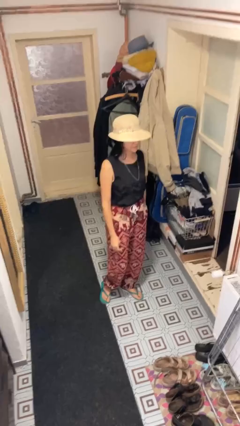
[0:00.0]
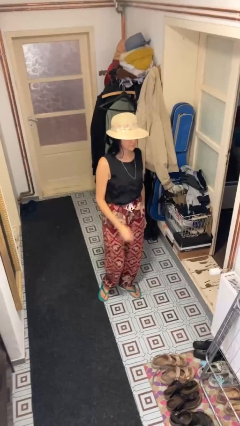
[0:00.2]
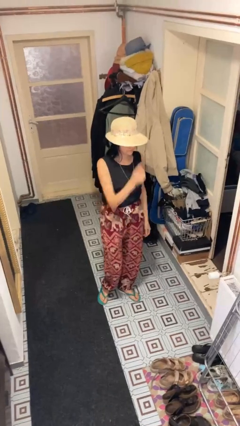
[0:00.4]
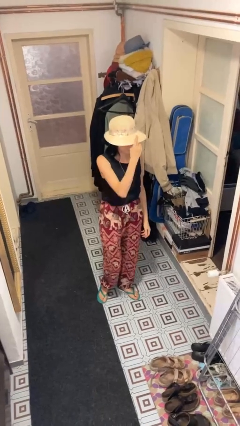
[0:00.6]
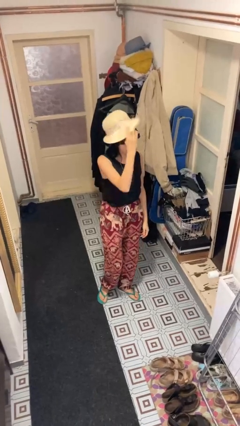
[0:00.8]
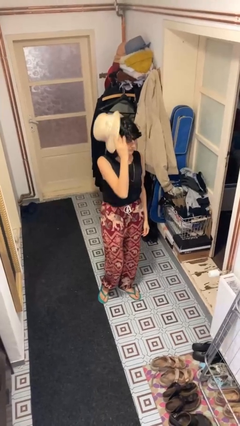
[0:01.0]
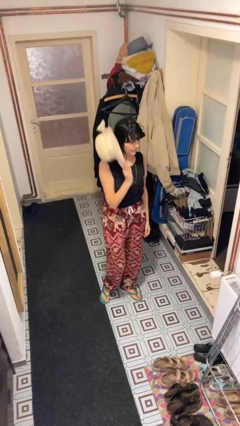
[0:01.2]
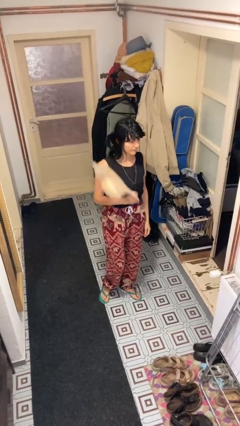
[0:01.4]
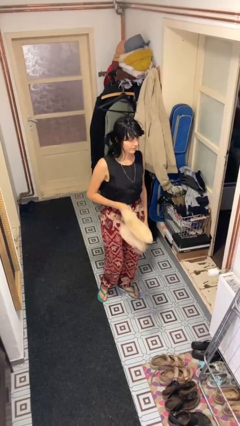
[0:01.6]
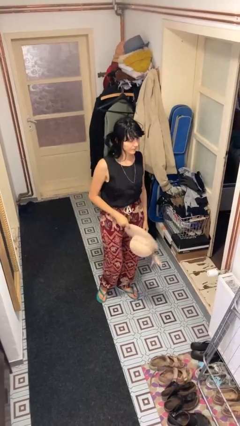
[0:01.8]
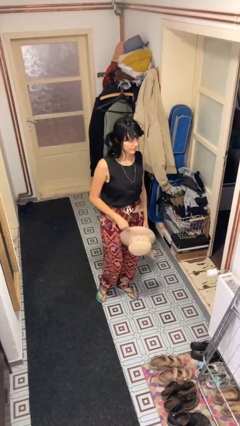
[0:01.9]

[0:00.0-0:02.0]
person takes off hat

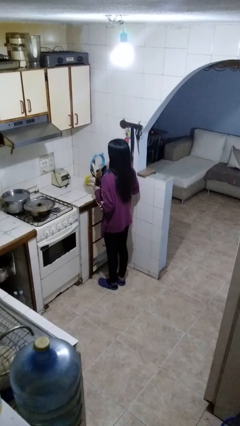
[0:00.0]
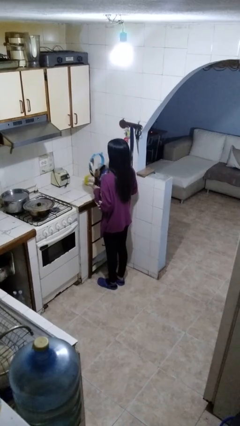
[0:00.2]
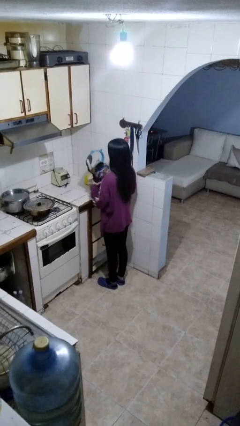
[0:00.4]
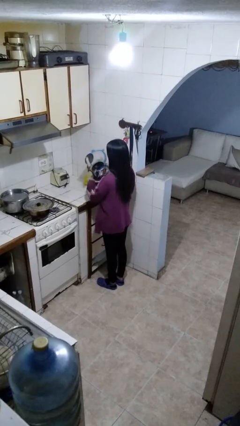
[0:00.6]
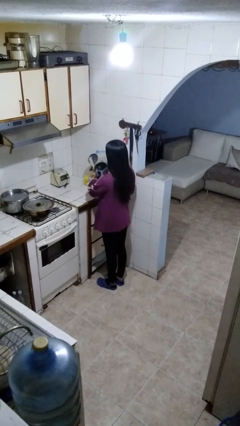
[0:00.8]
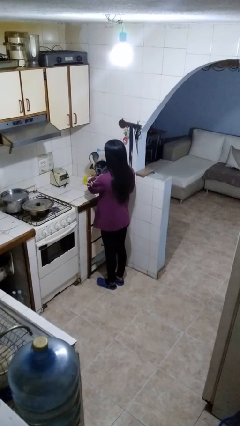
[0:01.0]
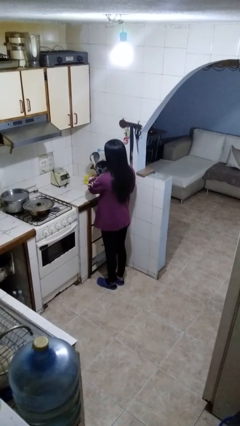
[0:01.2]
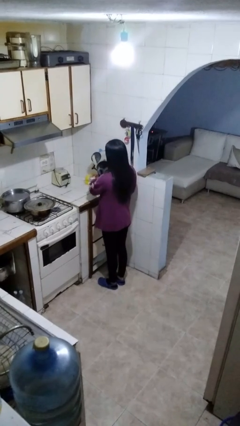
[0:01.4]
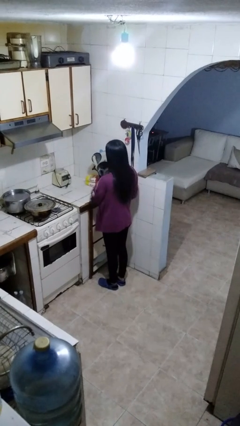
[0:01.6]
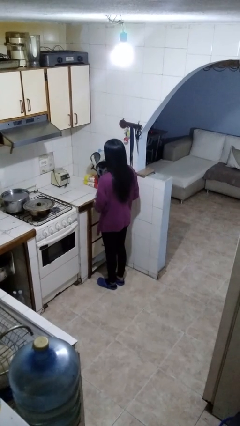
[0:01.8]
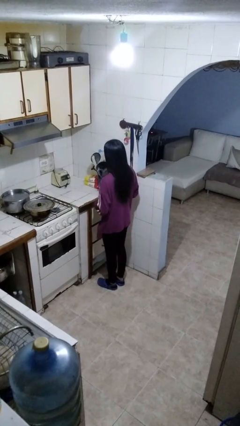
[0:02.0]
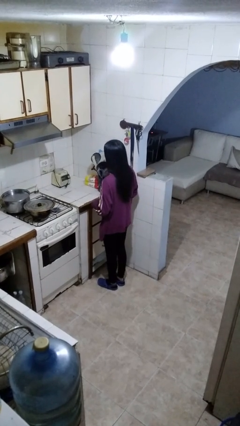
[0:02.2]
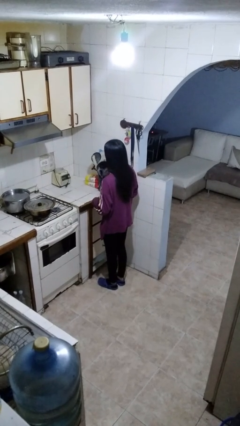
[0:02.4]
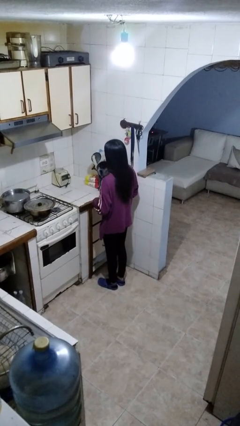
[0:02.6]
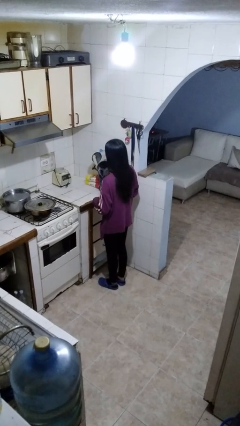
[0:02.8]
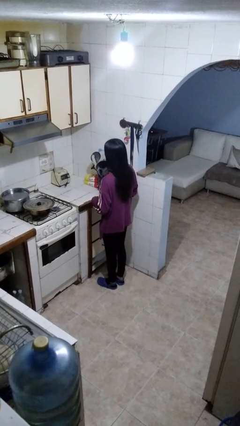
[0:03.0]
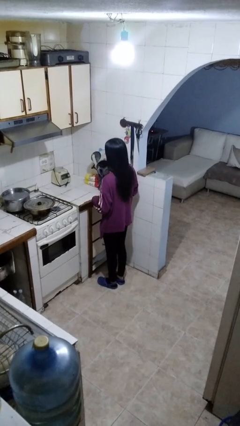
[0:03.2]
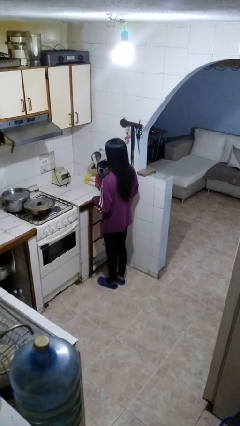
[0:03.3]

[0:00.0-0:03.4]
person picks up object from countertop

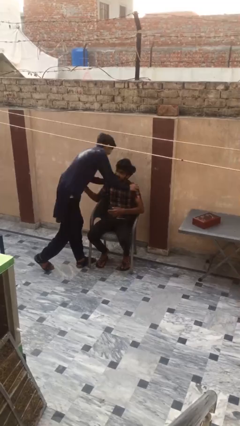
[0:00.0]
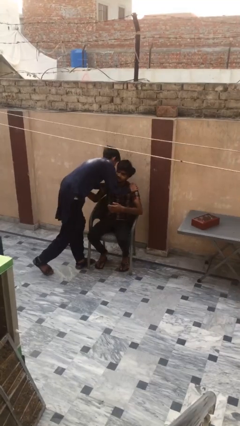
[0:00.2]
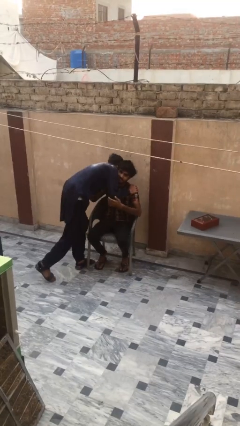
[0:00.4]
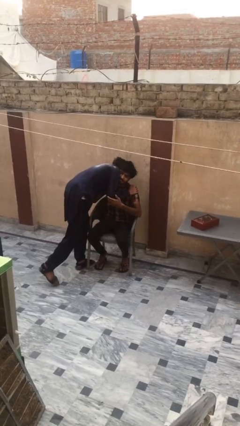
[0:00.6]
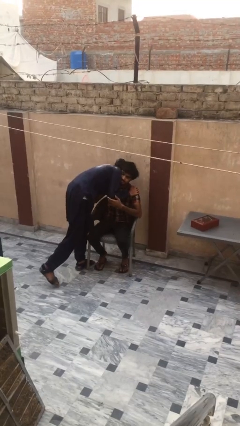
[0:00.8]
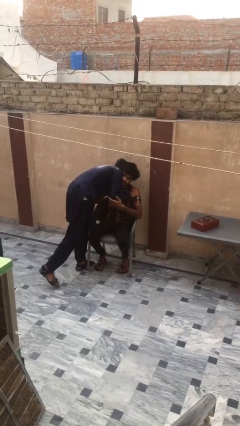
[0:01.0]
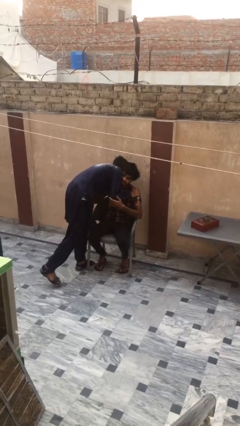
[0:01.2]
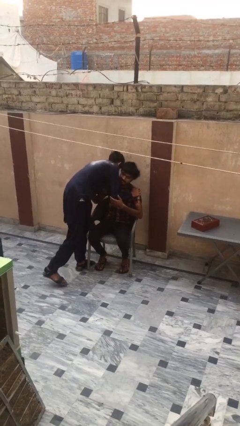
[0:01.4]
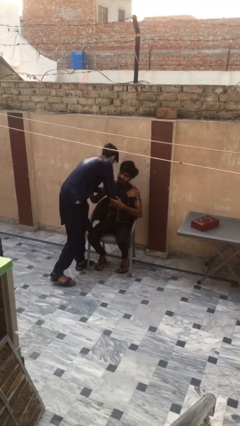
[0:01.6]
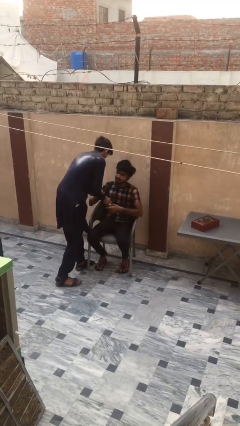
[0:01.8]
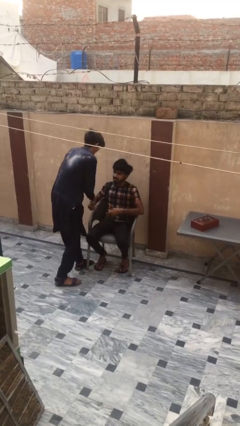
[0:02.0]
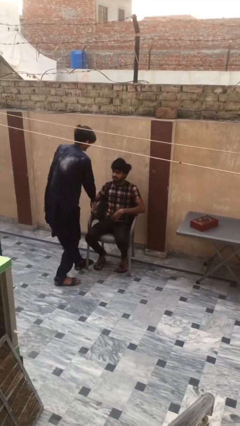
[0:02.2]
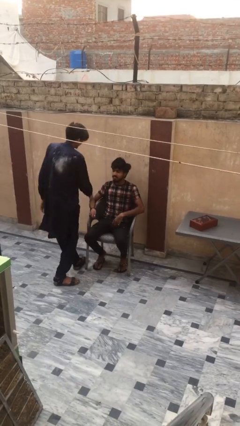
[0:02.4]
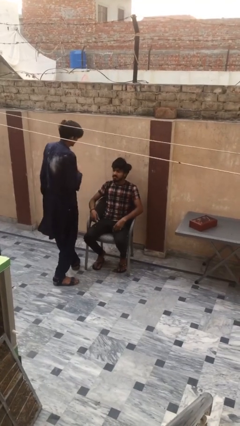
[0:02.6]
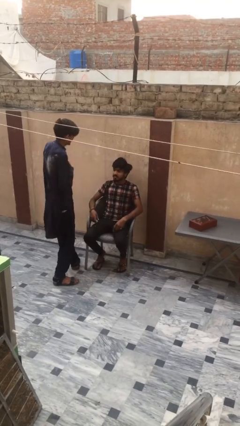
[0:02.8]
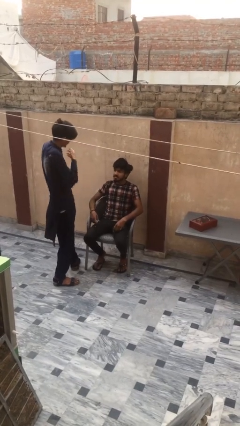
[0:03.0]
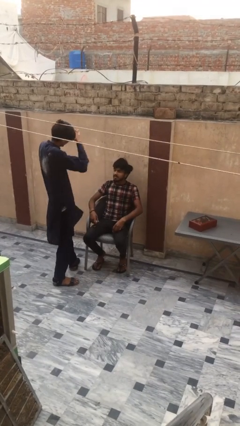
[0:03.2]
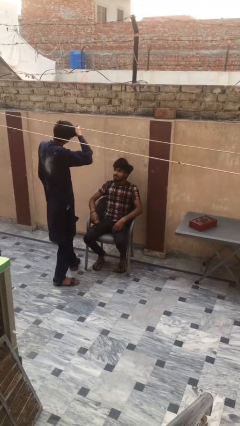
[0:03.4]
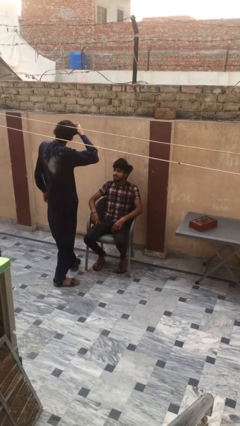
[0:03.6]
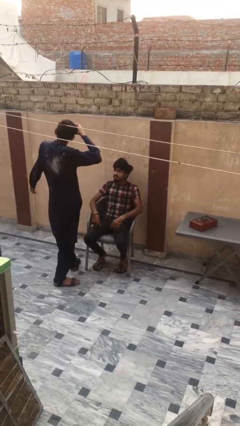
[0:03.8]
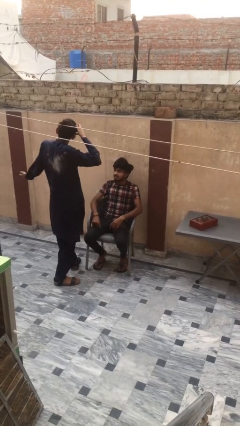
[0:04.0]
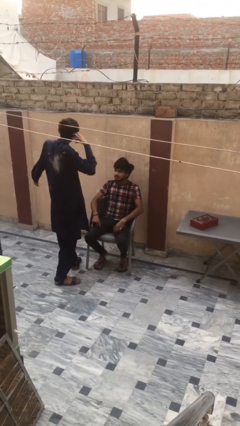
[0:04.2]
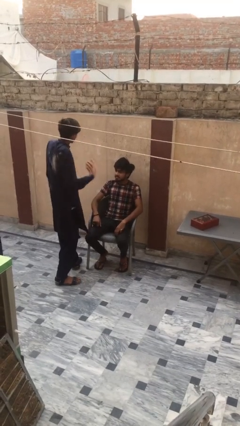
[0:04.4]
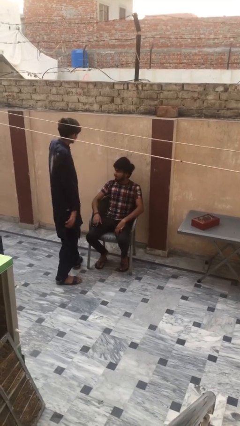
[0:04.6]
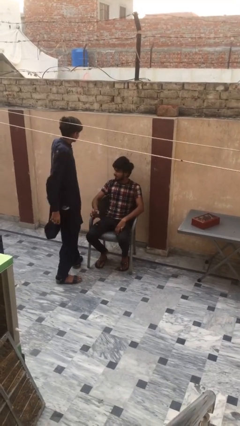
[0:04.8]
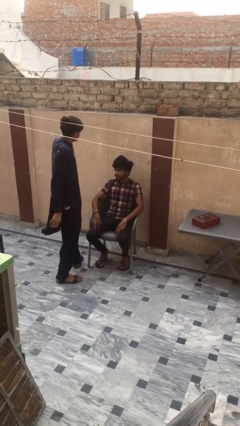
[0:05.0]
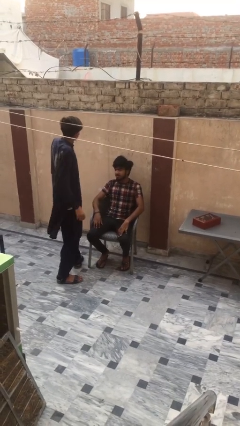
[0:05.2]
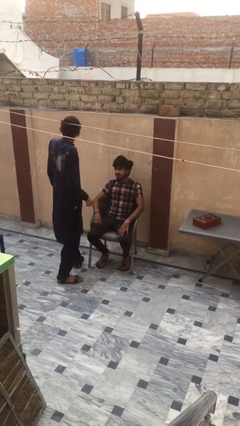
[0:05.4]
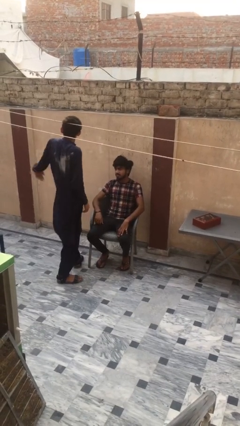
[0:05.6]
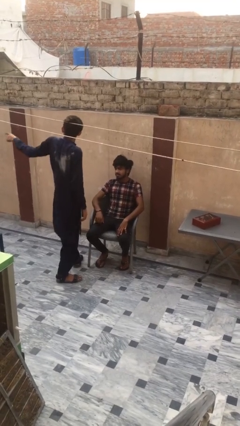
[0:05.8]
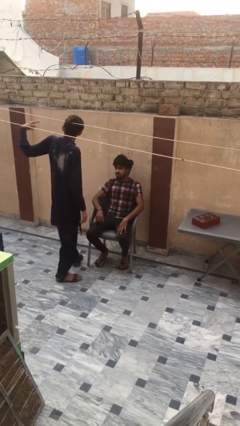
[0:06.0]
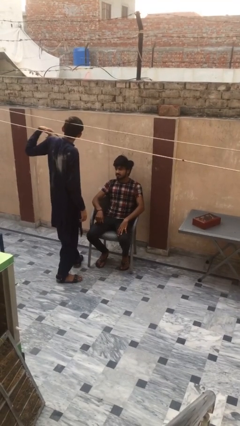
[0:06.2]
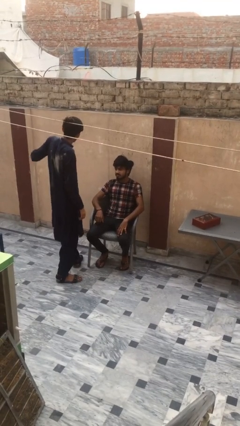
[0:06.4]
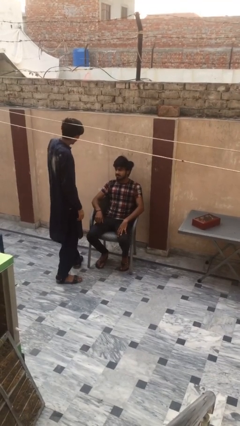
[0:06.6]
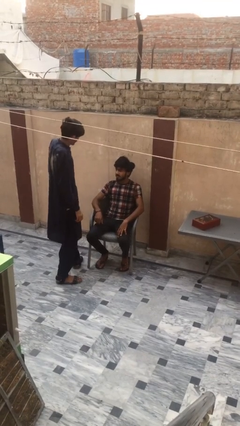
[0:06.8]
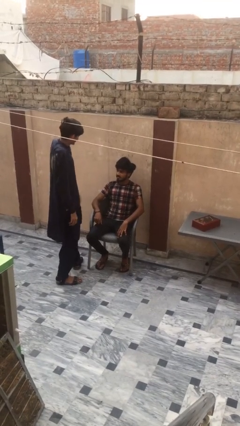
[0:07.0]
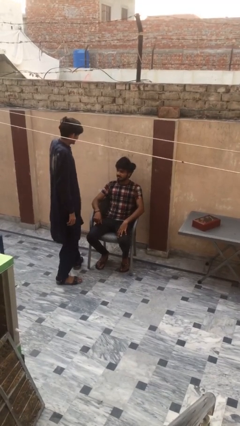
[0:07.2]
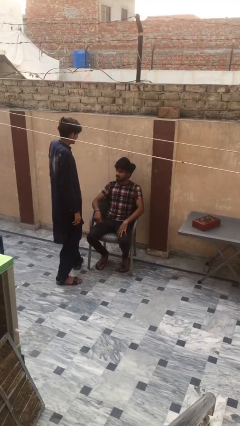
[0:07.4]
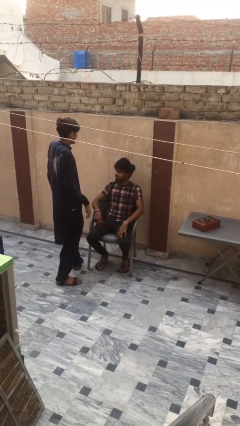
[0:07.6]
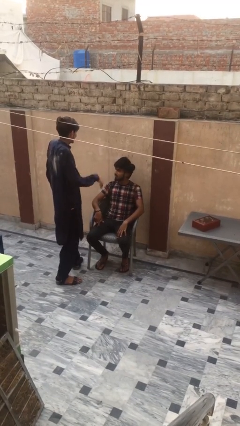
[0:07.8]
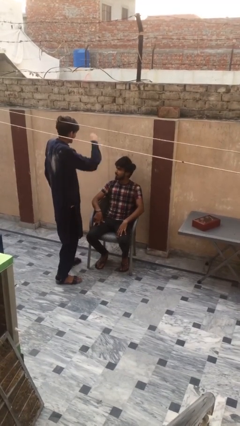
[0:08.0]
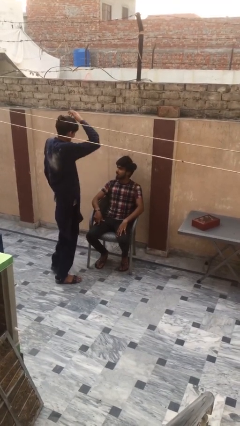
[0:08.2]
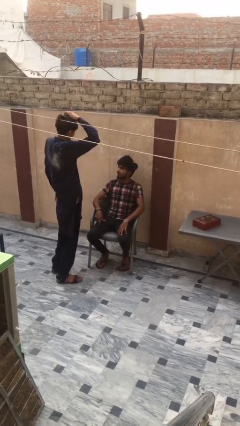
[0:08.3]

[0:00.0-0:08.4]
person embraces person

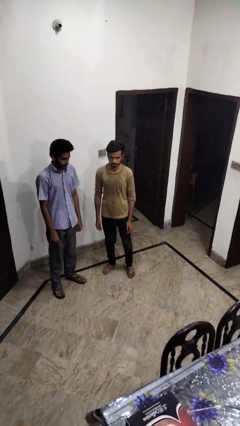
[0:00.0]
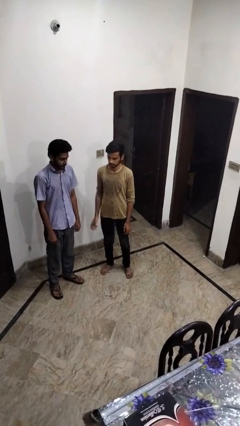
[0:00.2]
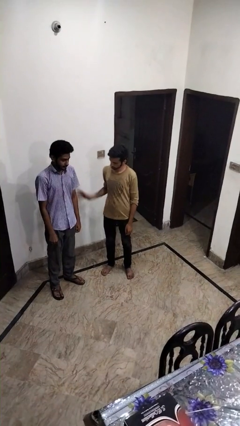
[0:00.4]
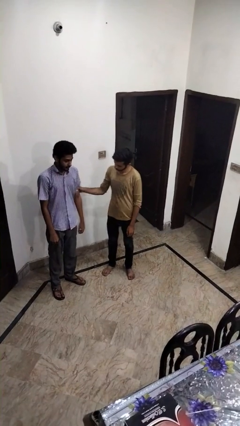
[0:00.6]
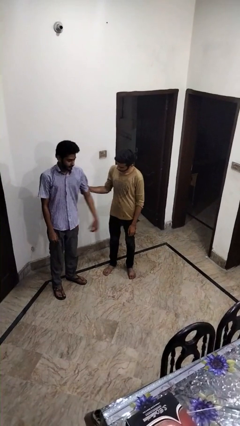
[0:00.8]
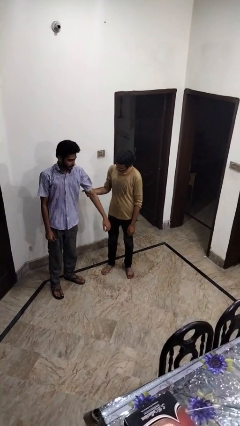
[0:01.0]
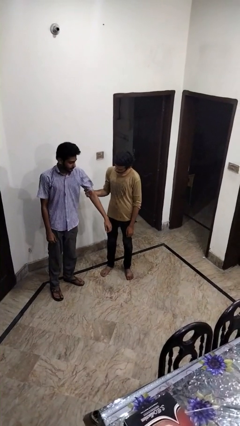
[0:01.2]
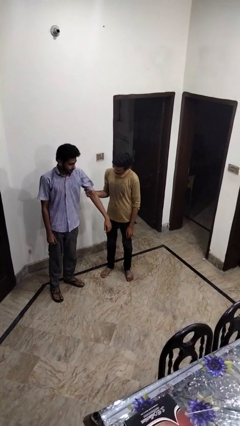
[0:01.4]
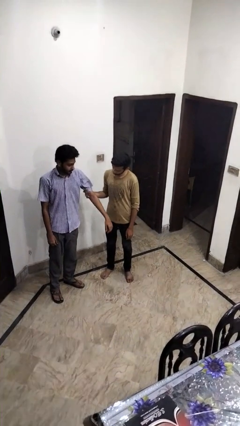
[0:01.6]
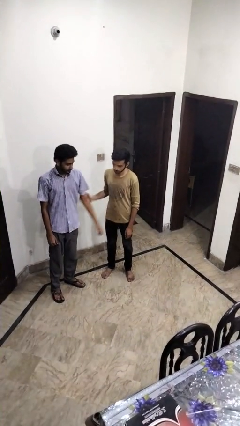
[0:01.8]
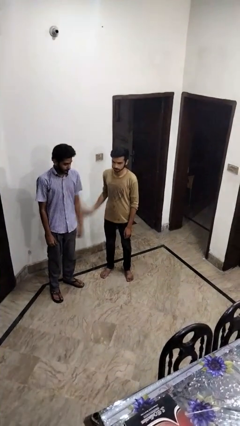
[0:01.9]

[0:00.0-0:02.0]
person grabs person by bicep

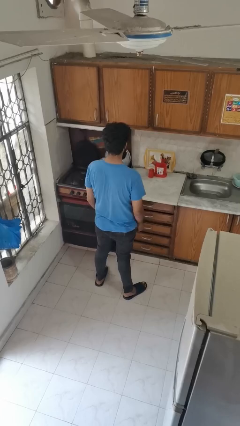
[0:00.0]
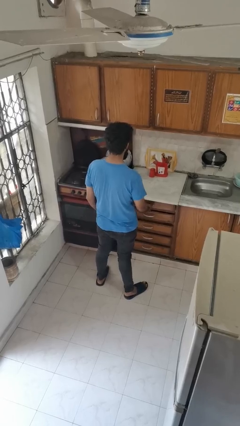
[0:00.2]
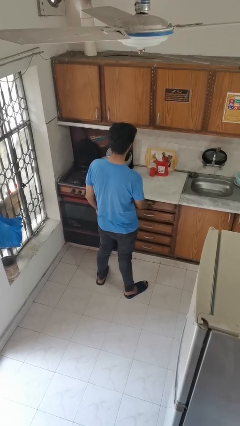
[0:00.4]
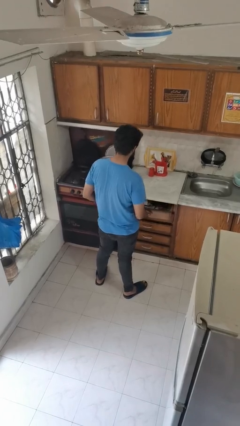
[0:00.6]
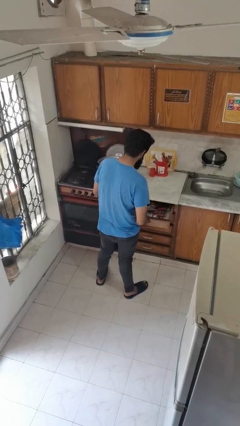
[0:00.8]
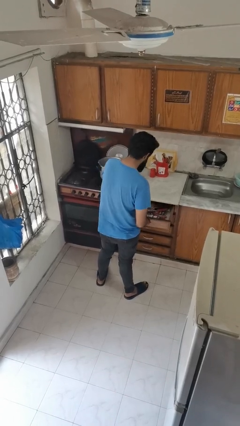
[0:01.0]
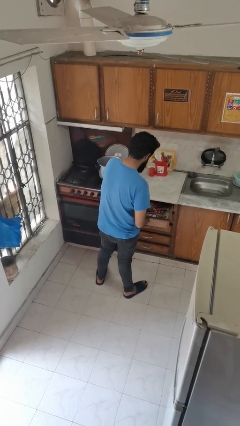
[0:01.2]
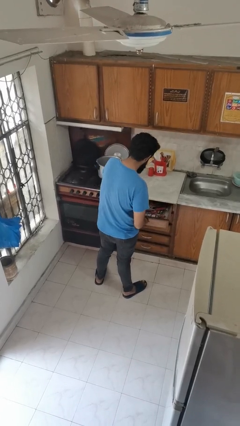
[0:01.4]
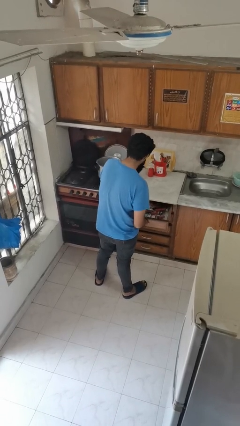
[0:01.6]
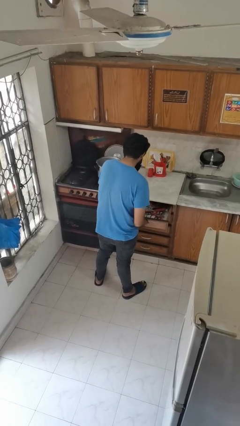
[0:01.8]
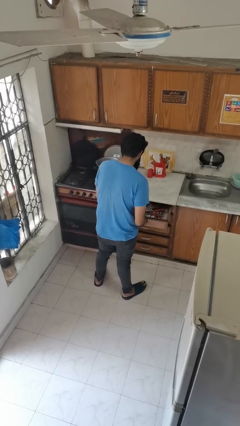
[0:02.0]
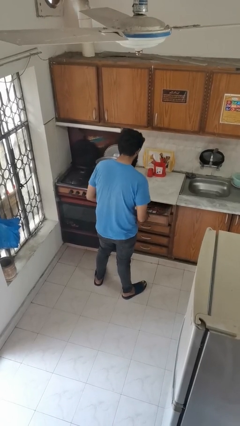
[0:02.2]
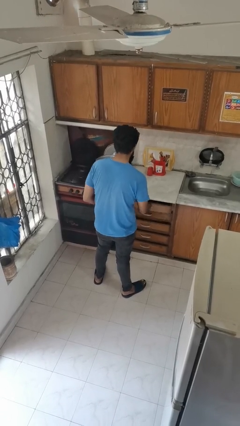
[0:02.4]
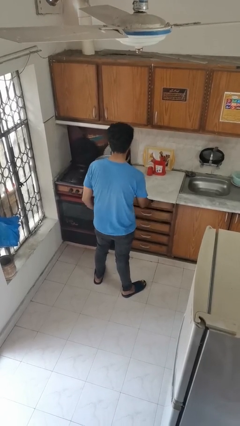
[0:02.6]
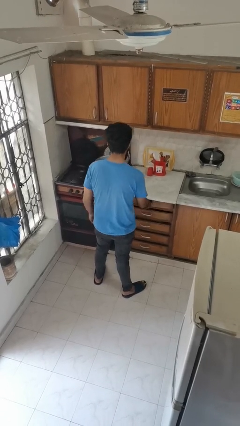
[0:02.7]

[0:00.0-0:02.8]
person searches in kitchen drawer
